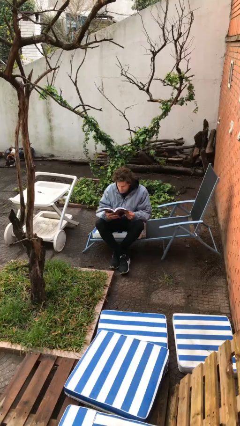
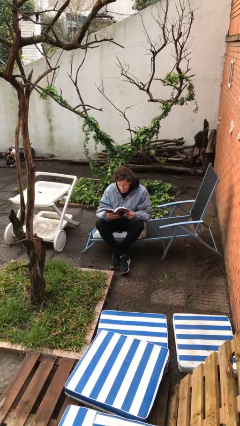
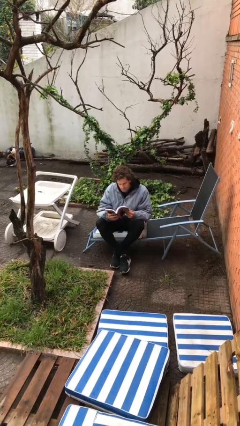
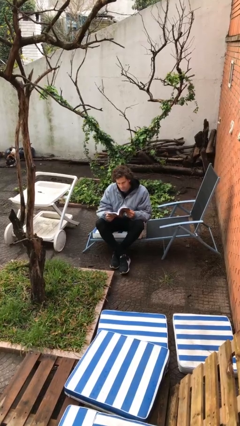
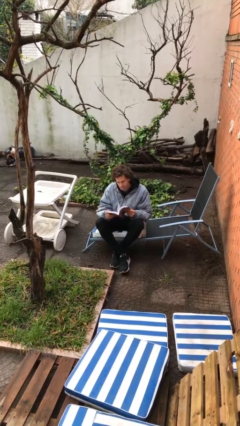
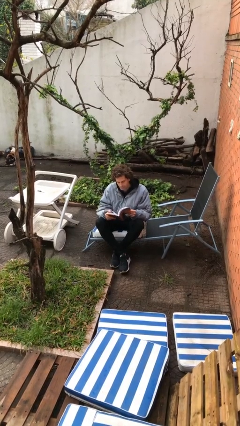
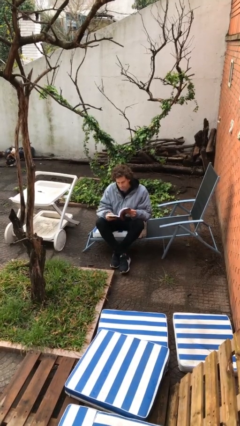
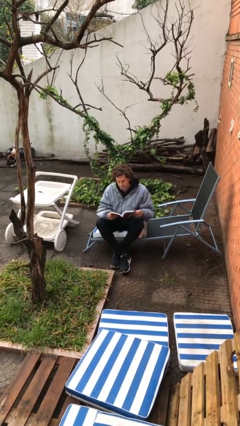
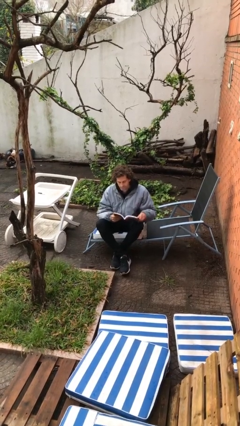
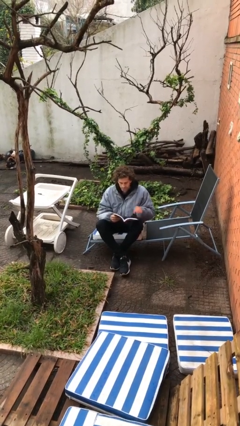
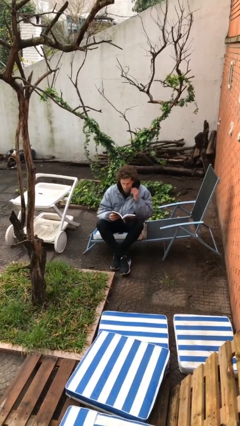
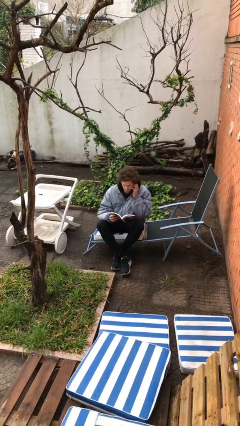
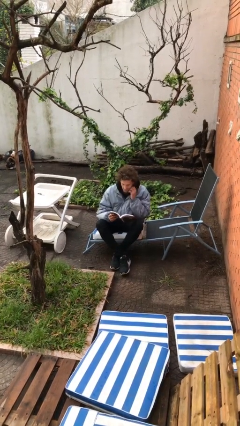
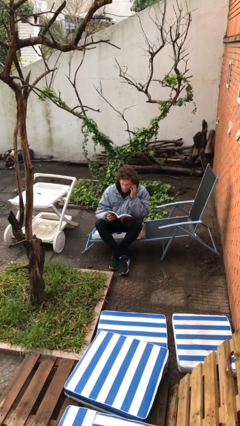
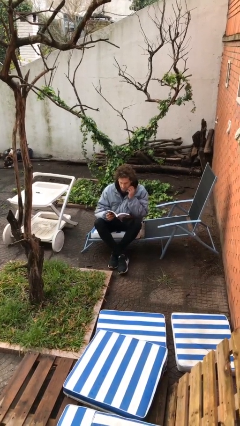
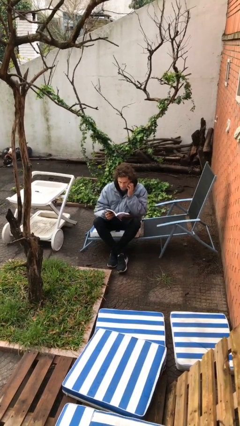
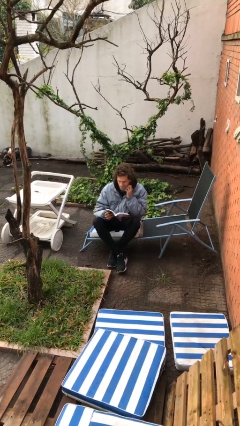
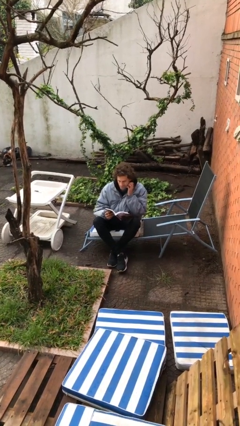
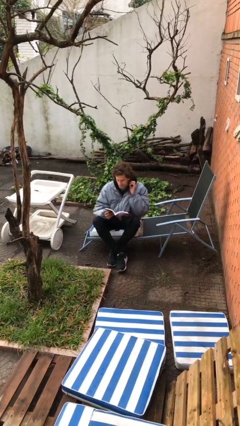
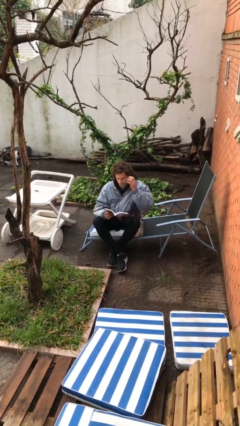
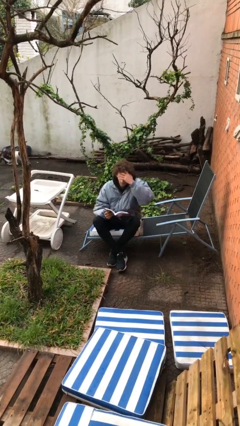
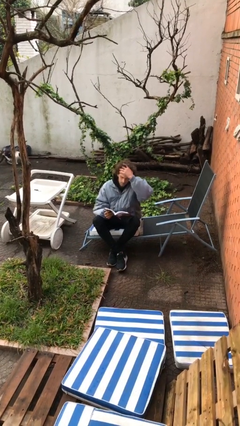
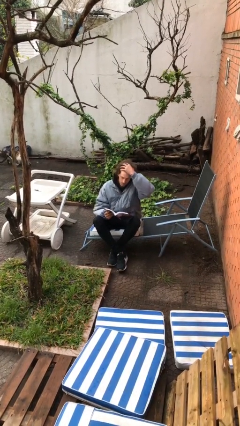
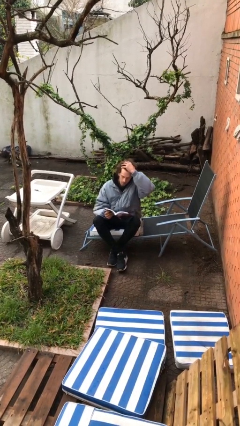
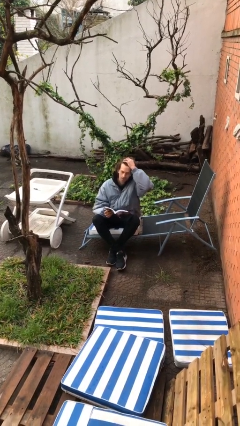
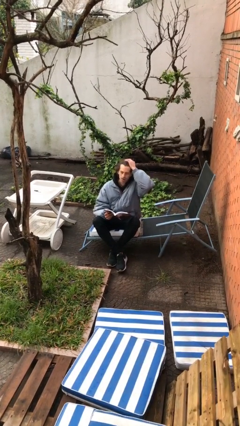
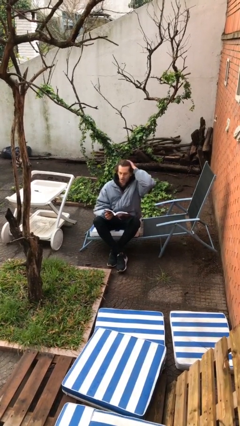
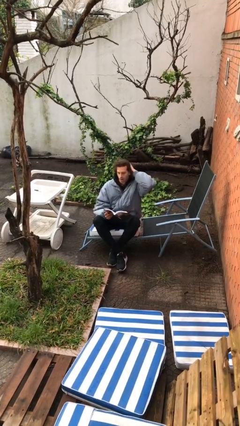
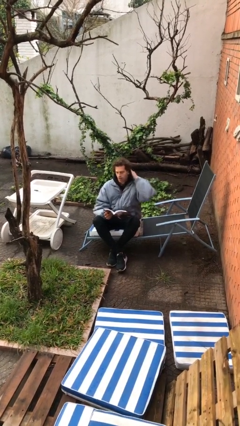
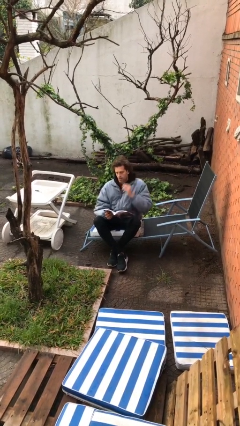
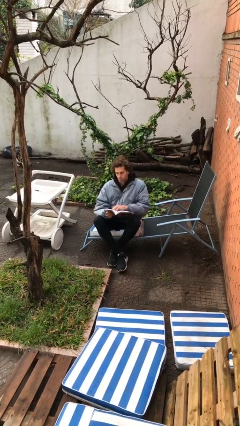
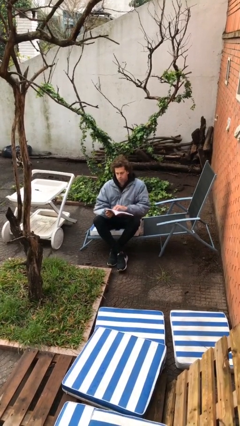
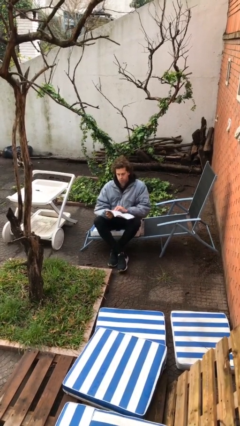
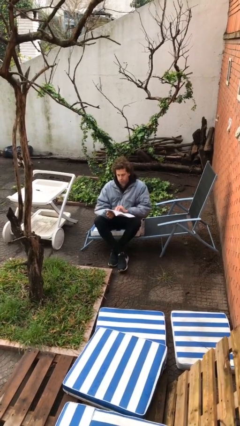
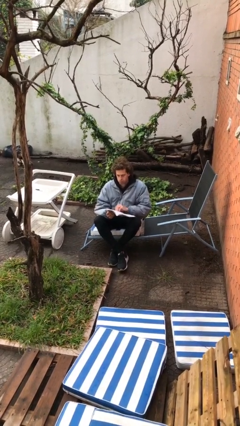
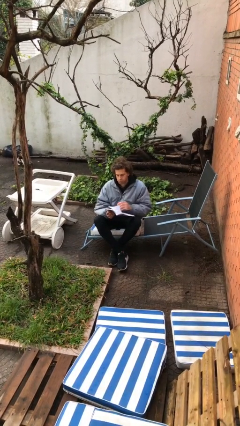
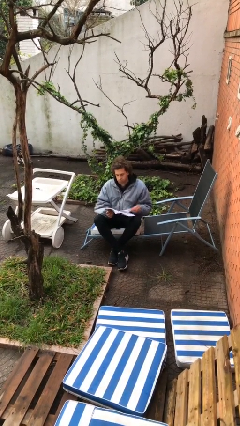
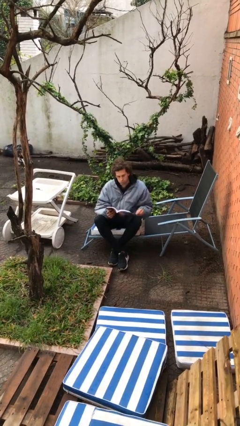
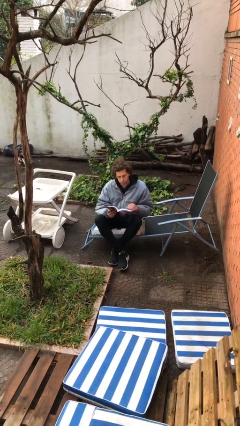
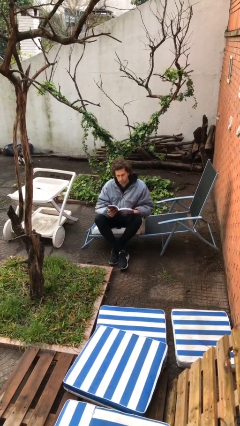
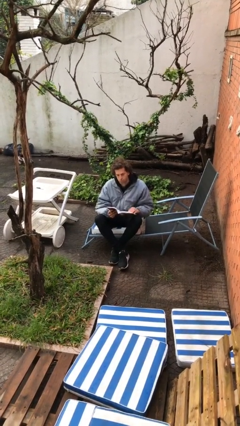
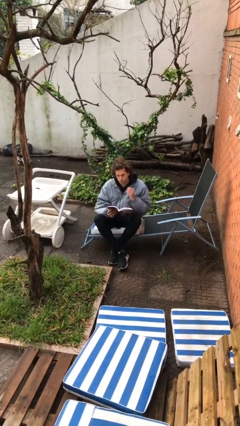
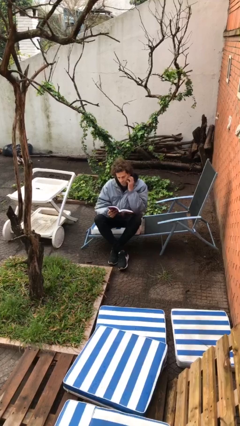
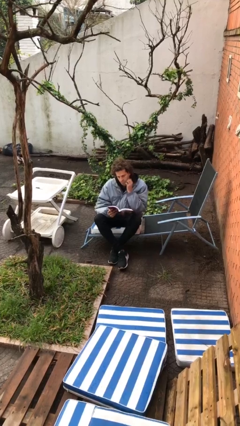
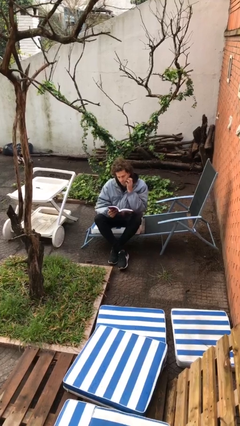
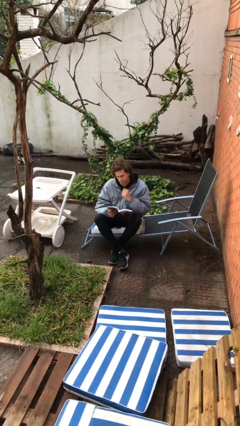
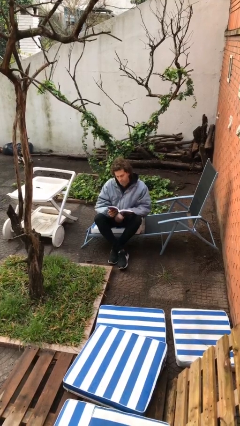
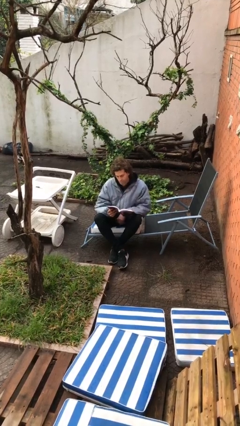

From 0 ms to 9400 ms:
person reads document

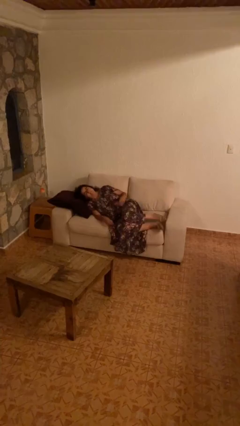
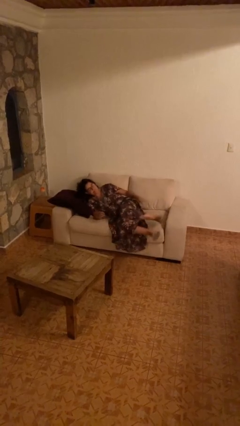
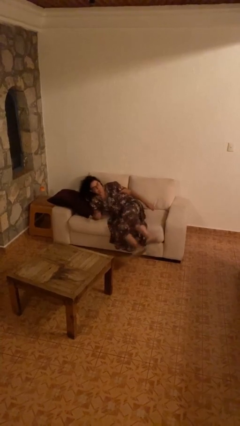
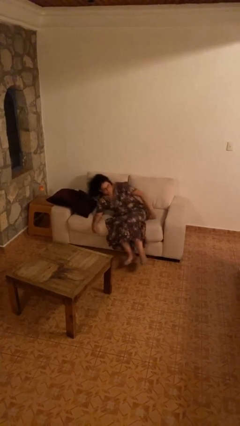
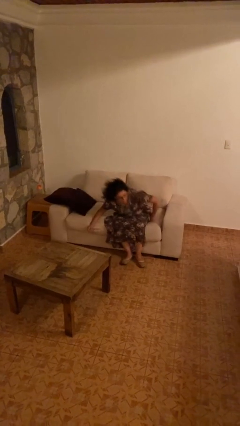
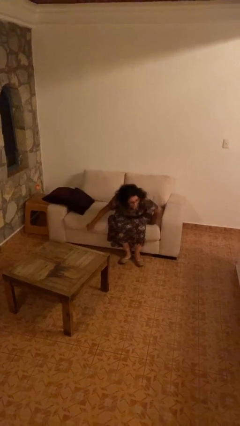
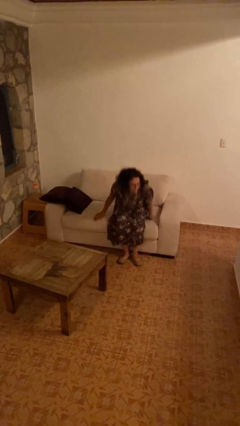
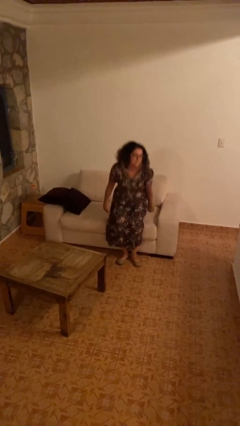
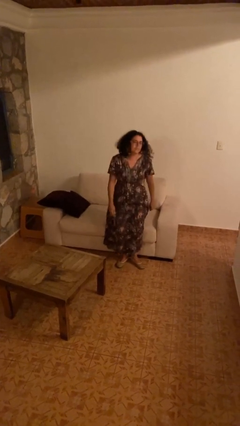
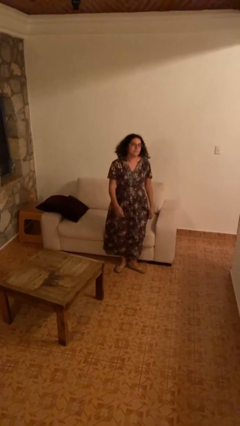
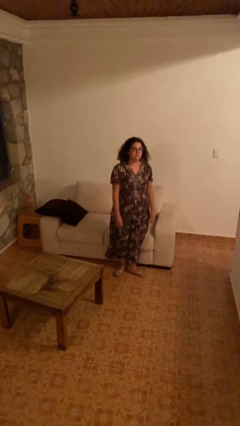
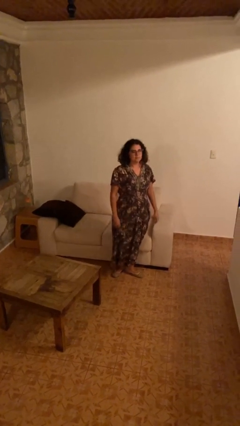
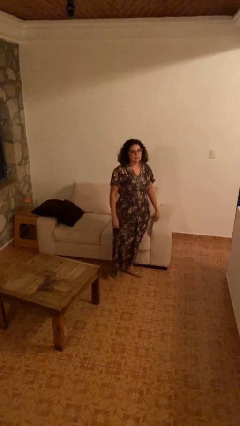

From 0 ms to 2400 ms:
person stands up

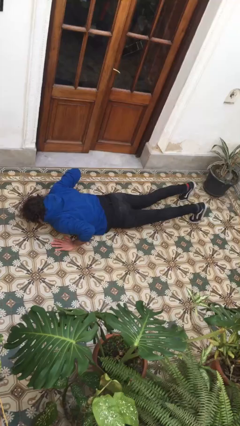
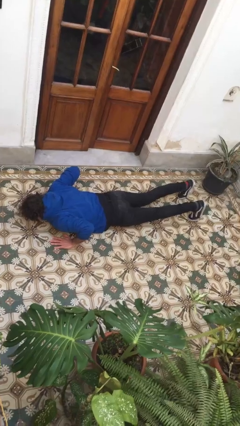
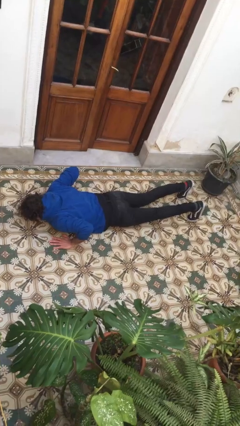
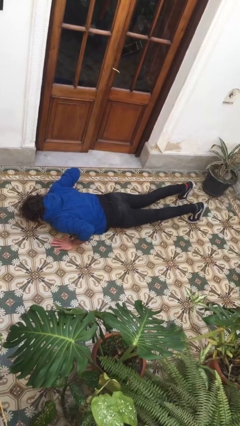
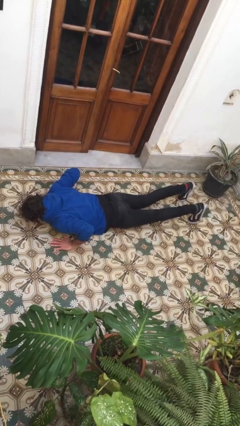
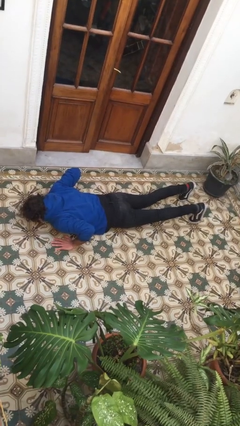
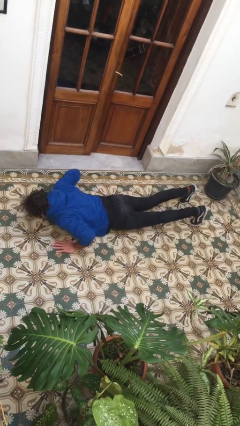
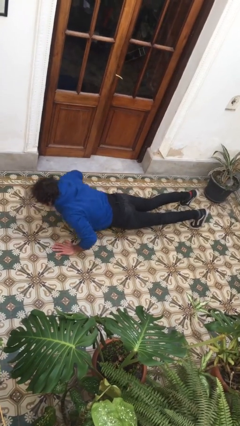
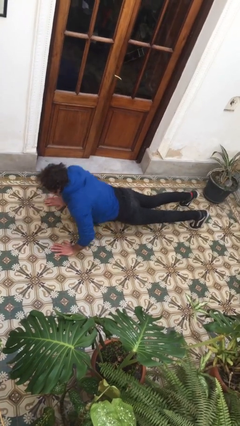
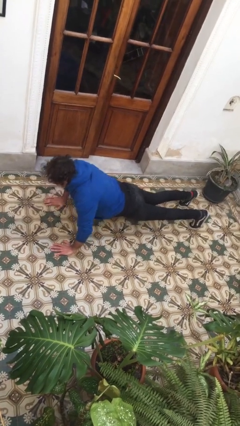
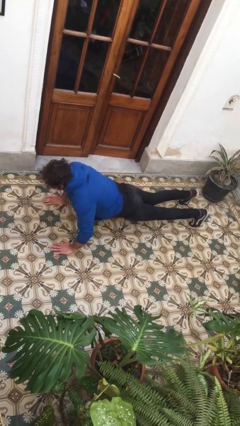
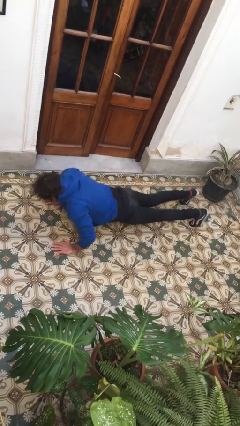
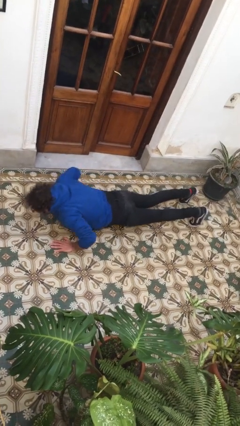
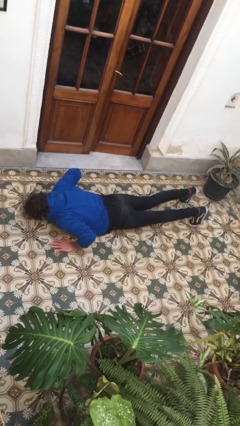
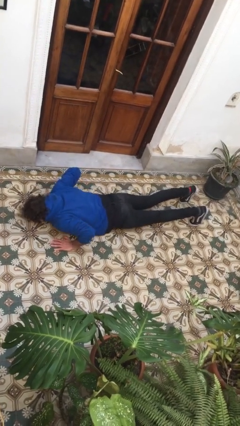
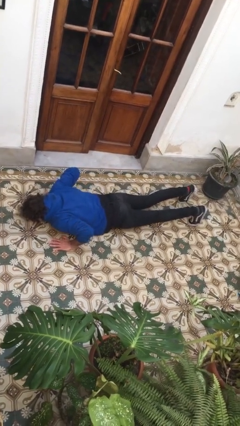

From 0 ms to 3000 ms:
person exercises with pushup

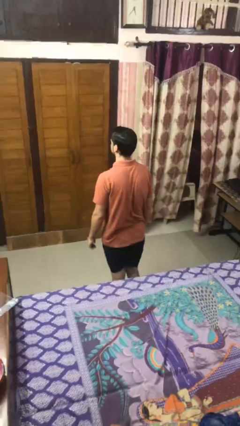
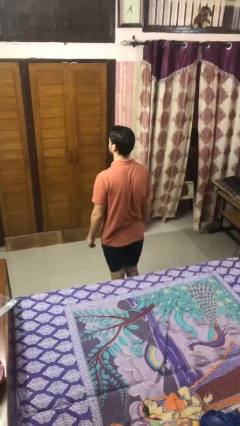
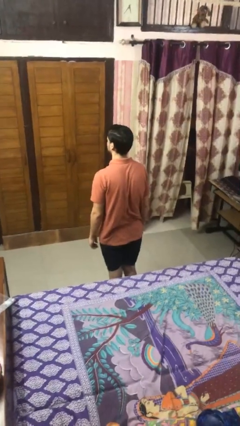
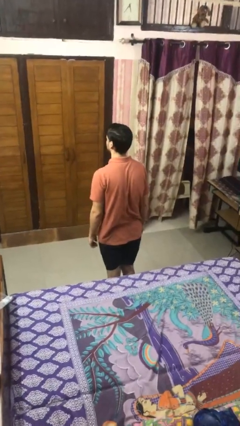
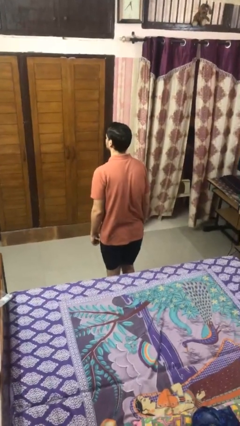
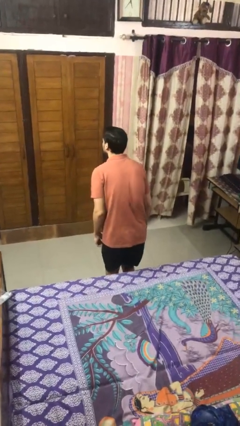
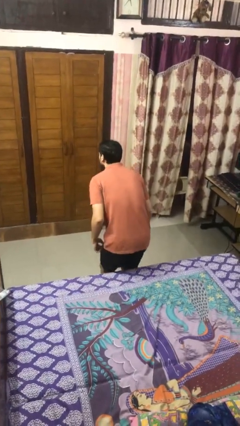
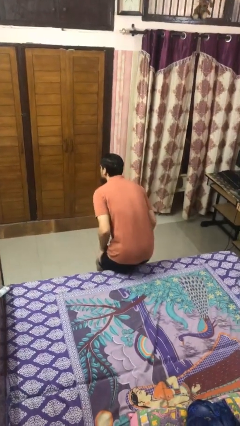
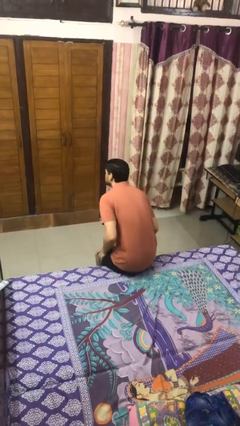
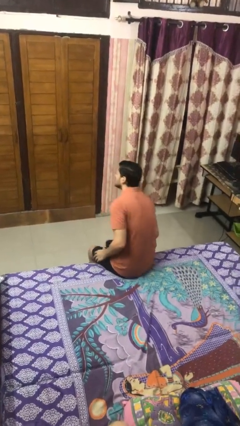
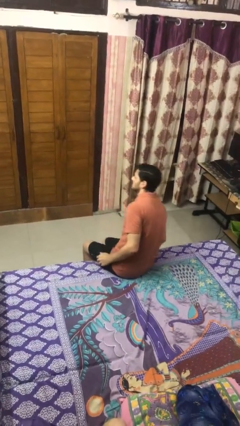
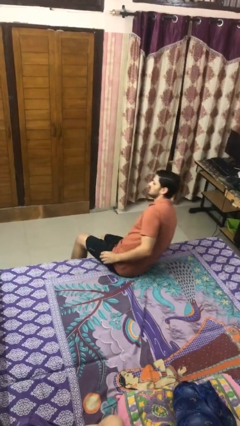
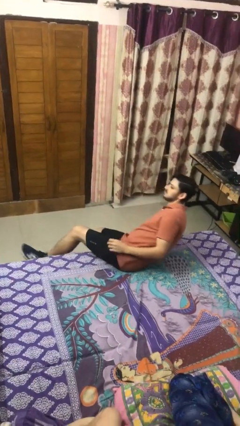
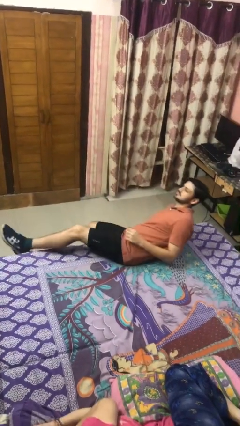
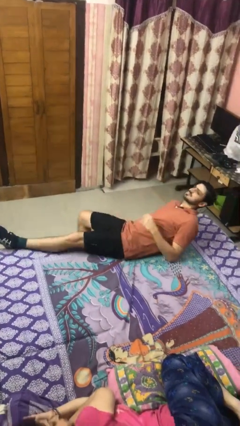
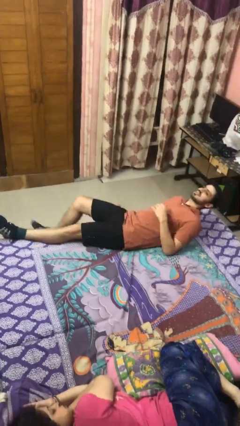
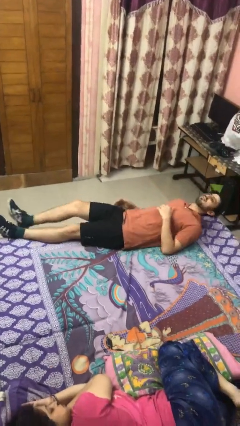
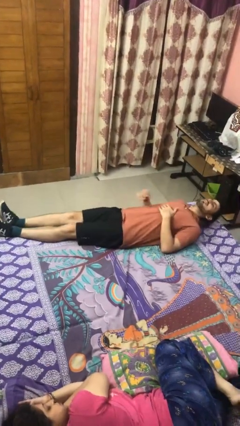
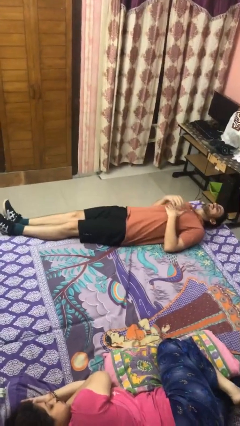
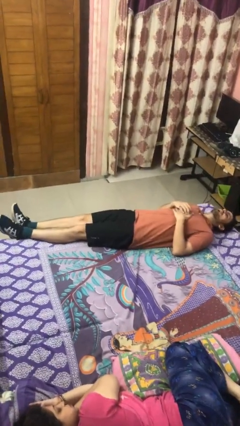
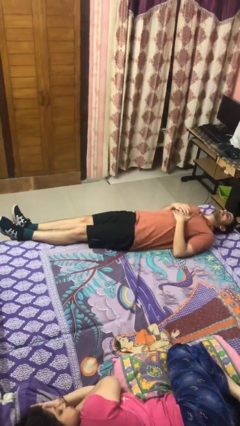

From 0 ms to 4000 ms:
person lies down on bed
